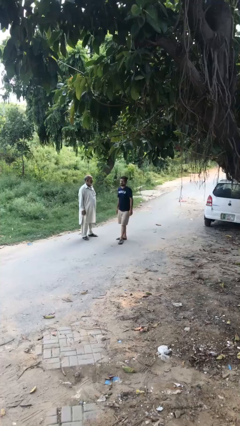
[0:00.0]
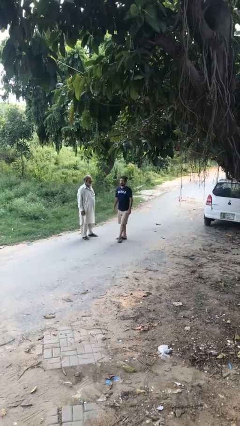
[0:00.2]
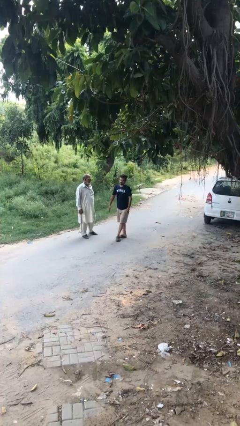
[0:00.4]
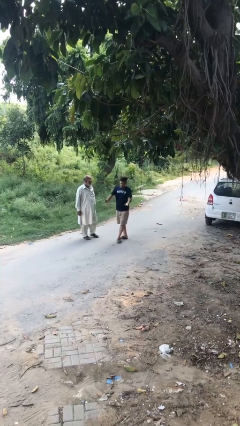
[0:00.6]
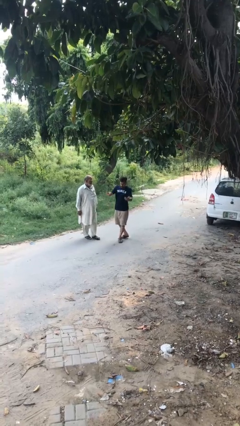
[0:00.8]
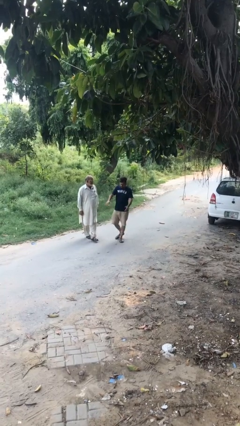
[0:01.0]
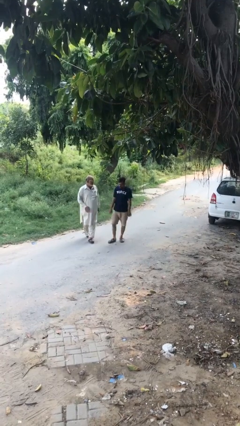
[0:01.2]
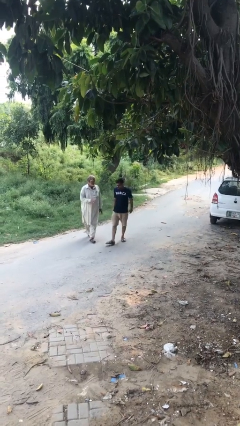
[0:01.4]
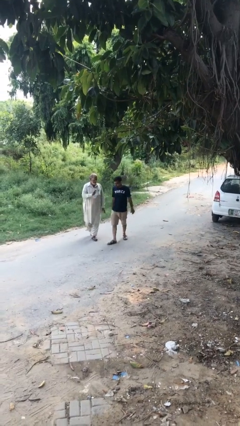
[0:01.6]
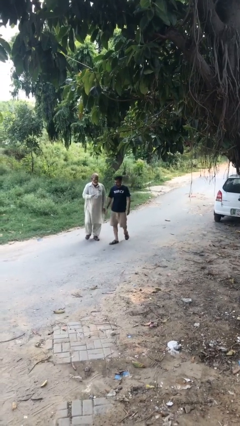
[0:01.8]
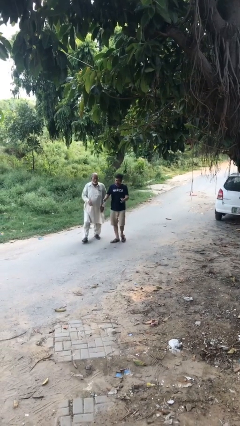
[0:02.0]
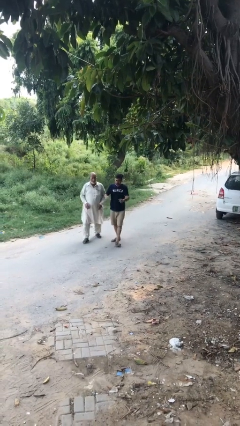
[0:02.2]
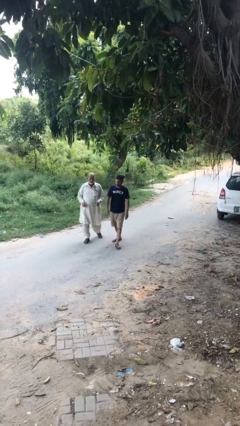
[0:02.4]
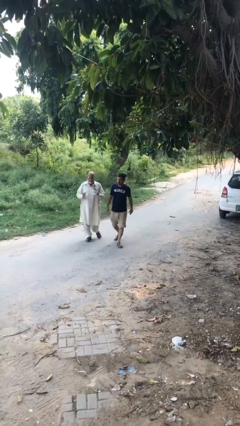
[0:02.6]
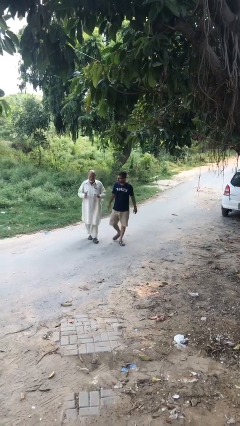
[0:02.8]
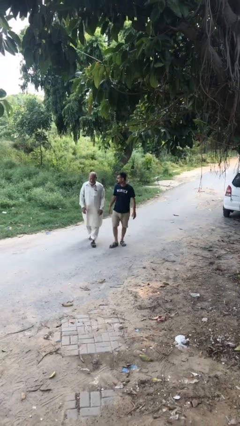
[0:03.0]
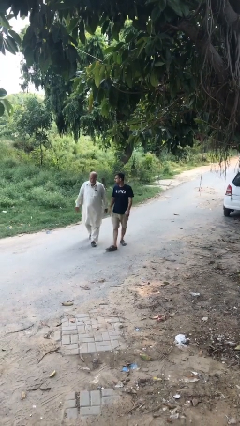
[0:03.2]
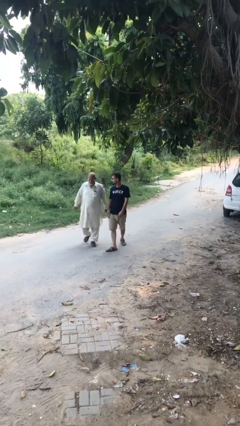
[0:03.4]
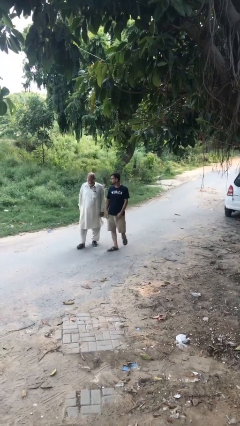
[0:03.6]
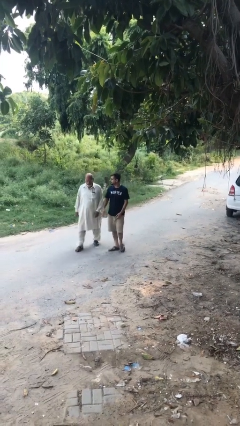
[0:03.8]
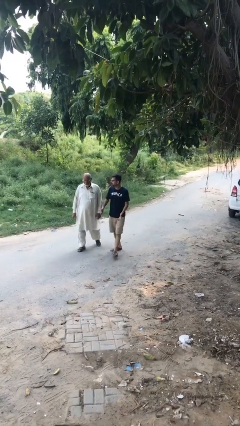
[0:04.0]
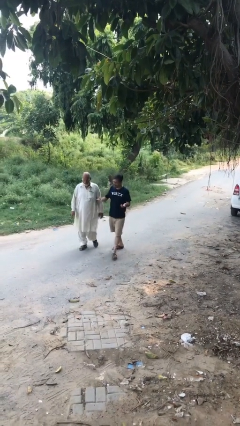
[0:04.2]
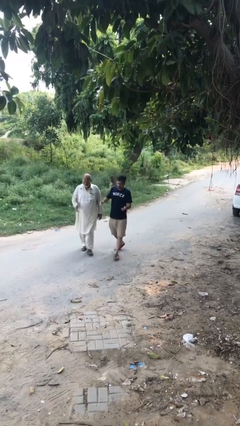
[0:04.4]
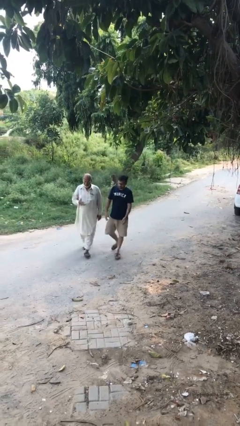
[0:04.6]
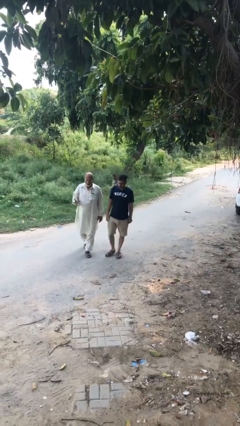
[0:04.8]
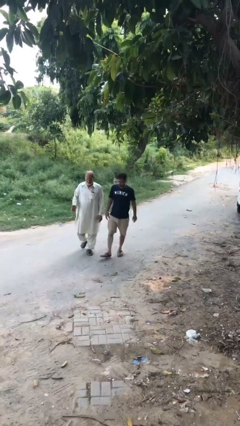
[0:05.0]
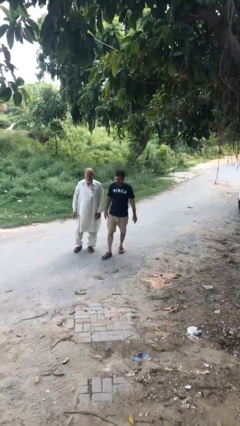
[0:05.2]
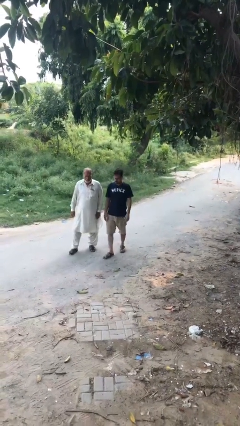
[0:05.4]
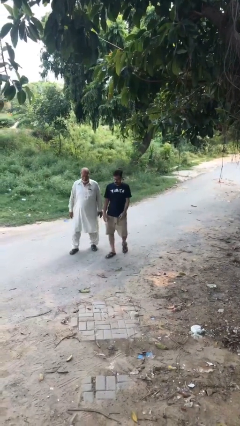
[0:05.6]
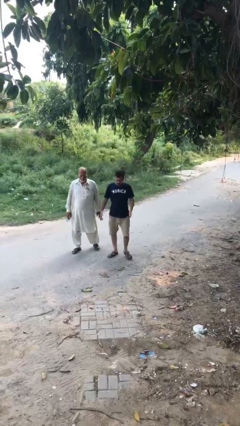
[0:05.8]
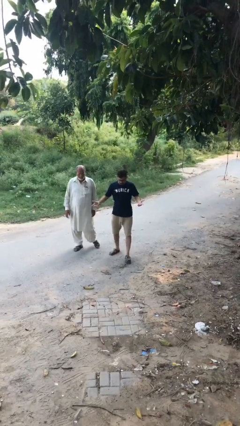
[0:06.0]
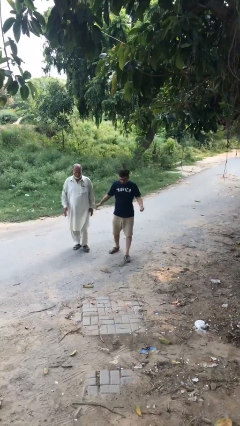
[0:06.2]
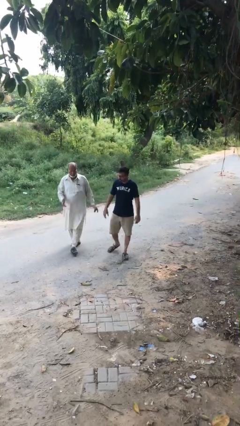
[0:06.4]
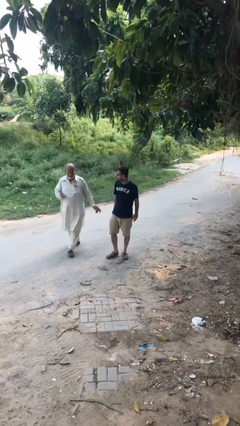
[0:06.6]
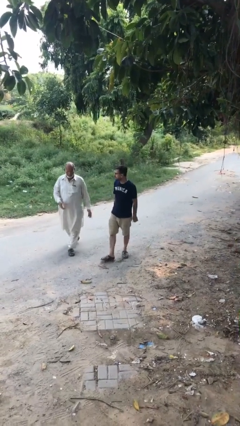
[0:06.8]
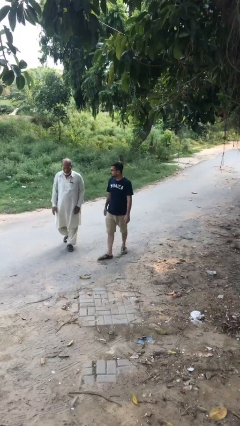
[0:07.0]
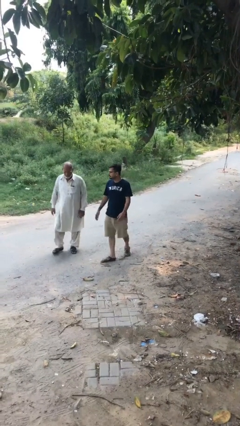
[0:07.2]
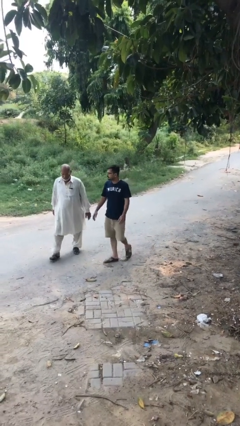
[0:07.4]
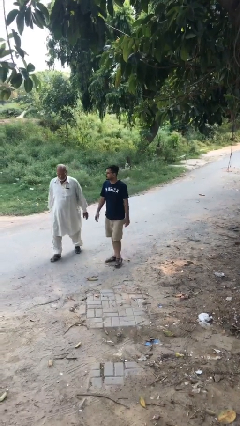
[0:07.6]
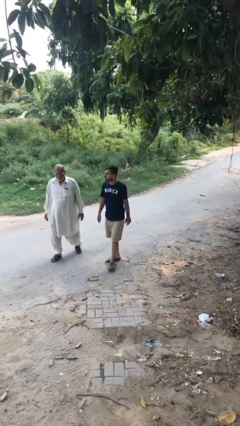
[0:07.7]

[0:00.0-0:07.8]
person talks to person

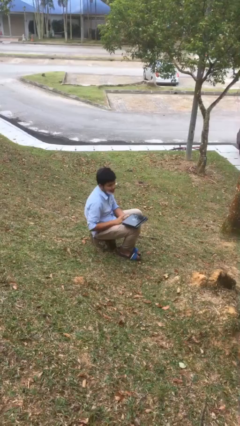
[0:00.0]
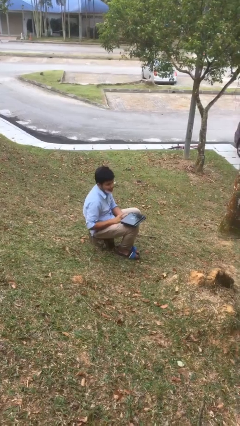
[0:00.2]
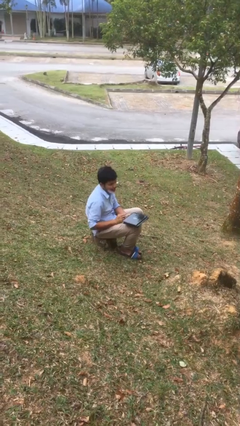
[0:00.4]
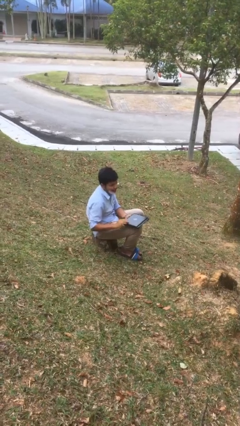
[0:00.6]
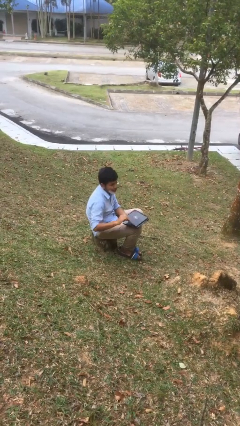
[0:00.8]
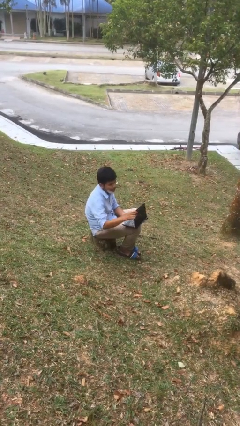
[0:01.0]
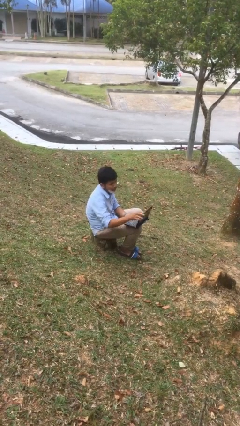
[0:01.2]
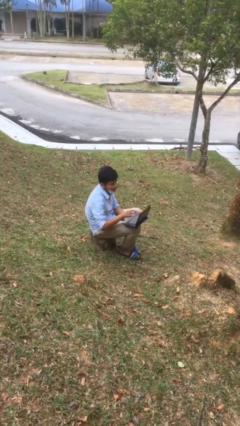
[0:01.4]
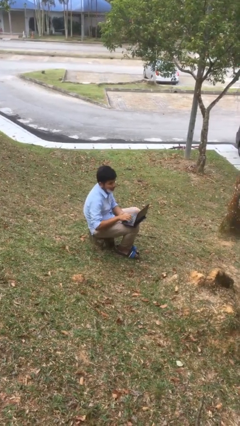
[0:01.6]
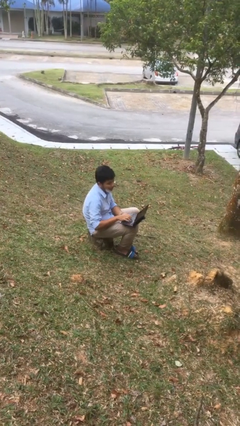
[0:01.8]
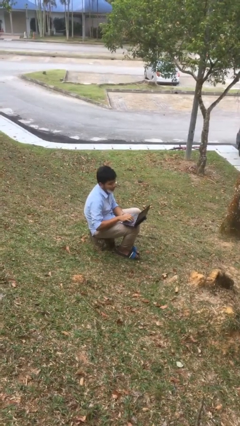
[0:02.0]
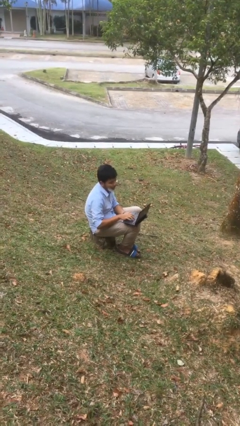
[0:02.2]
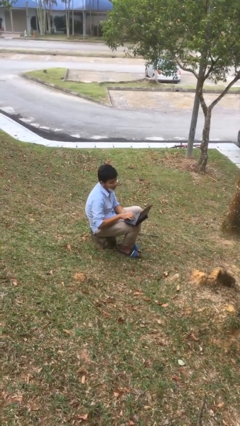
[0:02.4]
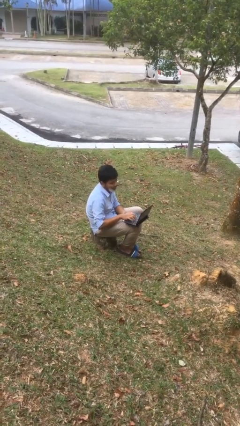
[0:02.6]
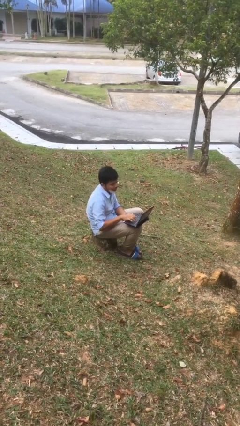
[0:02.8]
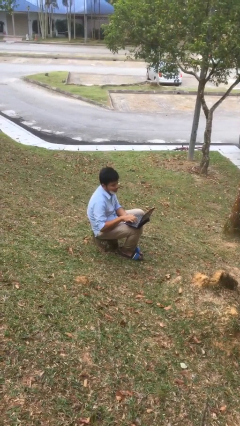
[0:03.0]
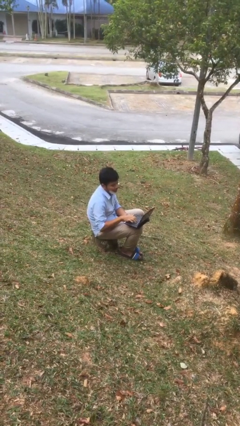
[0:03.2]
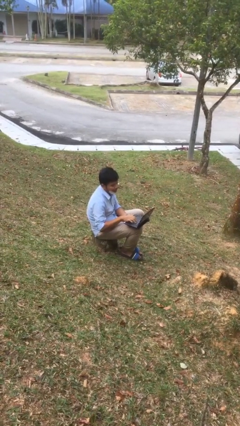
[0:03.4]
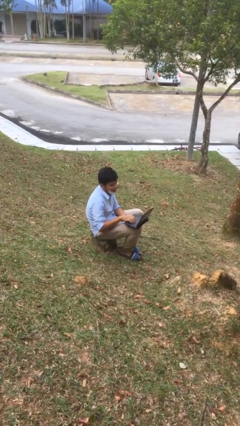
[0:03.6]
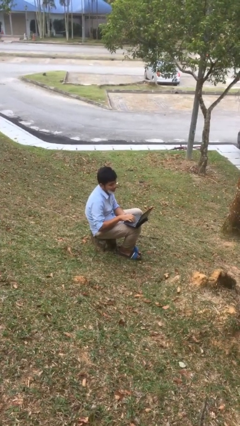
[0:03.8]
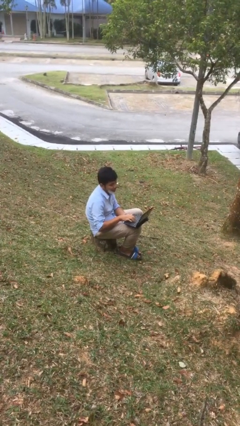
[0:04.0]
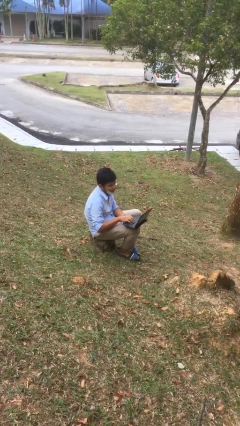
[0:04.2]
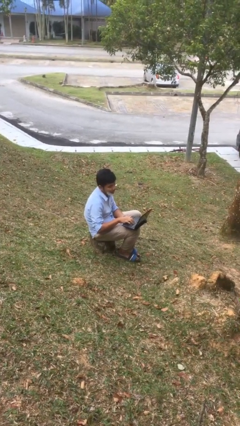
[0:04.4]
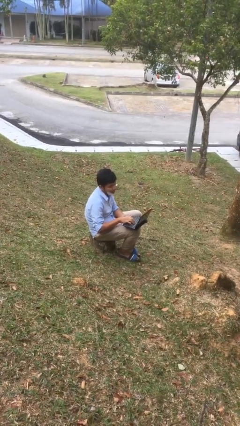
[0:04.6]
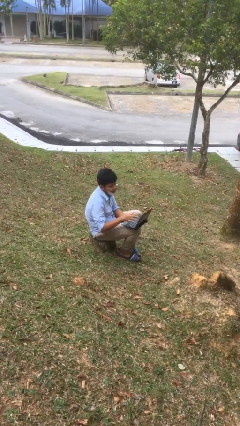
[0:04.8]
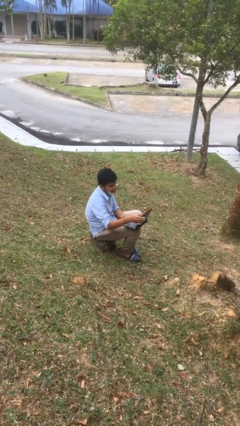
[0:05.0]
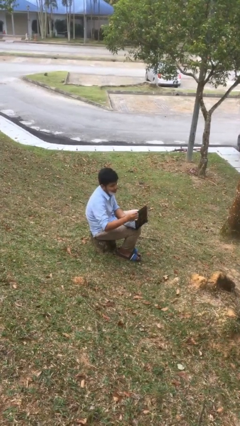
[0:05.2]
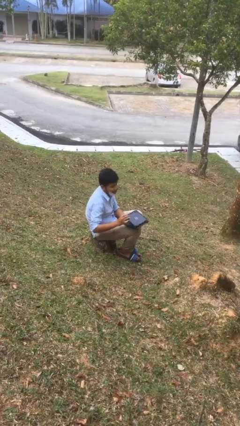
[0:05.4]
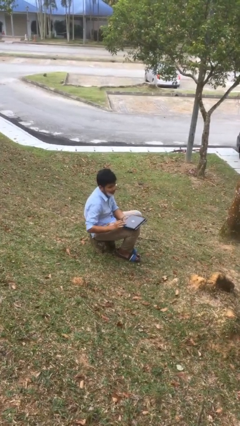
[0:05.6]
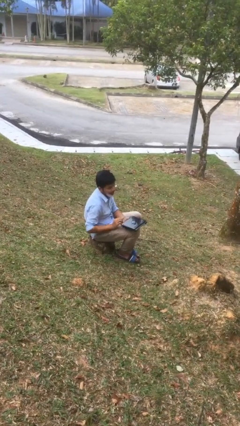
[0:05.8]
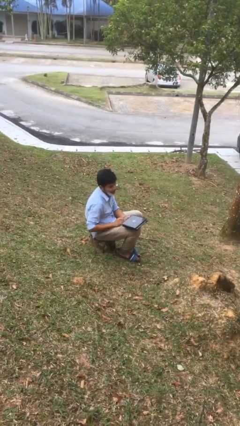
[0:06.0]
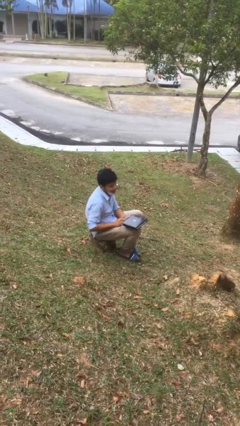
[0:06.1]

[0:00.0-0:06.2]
person interacts with laptop

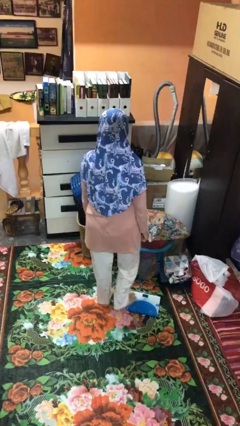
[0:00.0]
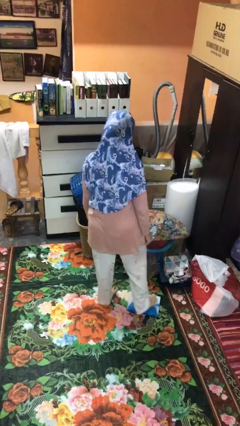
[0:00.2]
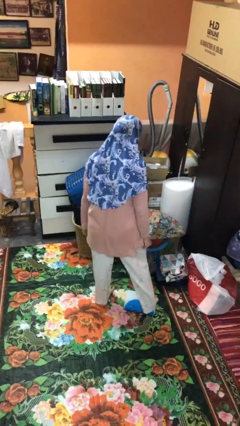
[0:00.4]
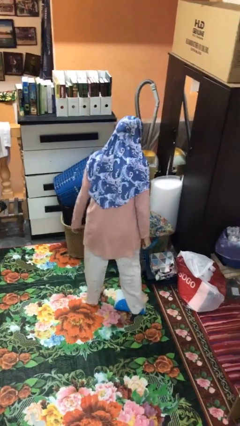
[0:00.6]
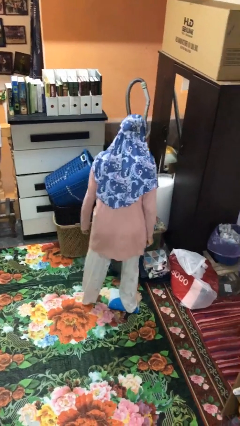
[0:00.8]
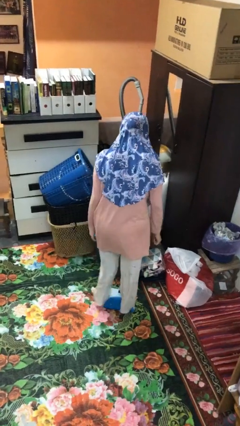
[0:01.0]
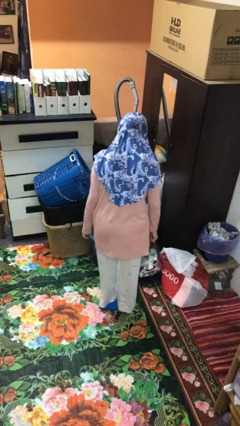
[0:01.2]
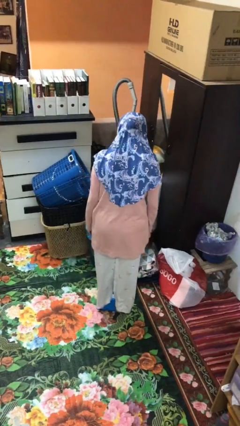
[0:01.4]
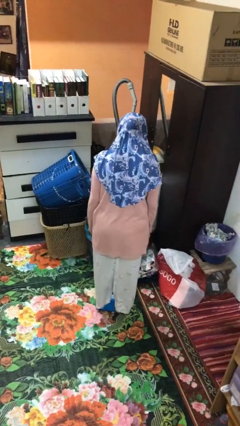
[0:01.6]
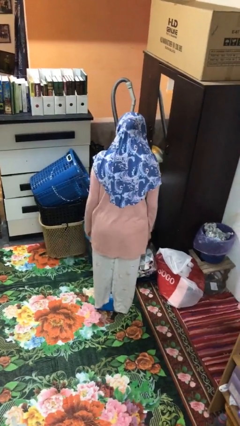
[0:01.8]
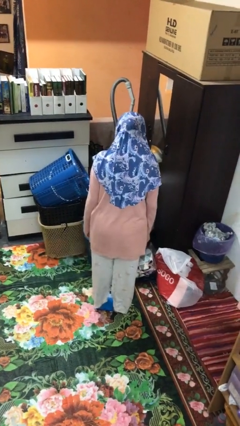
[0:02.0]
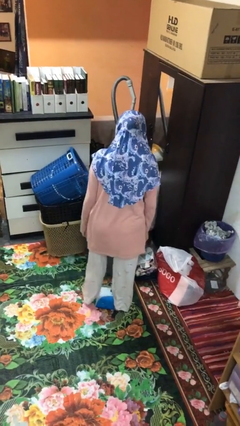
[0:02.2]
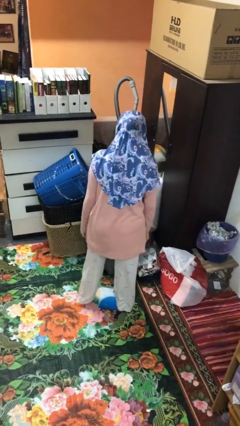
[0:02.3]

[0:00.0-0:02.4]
person uses bodyweight scale

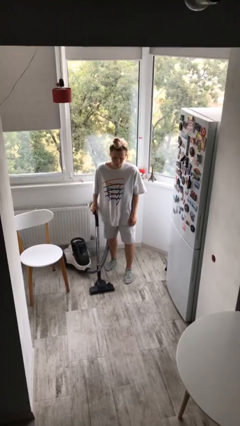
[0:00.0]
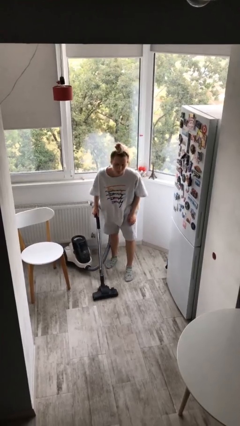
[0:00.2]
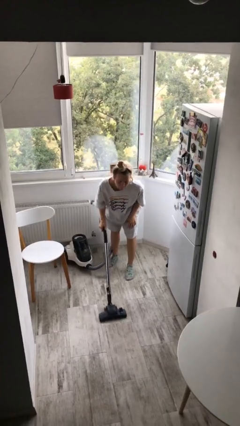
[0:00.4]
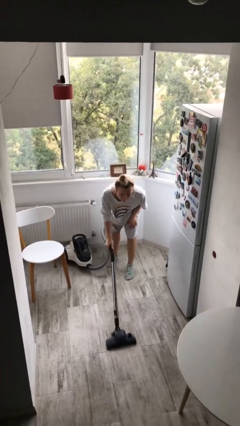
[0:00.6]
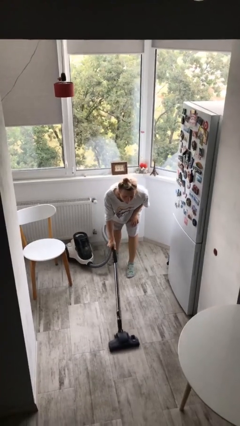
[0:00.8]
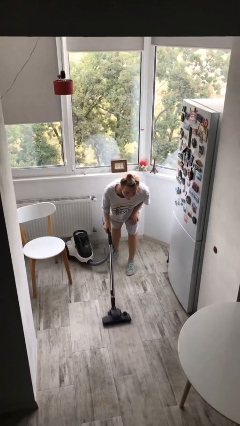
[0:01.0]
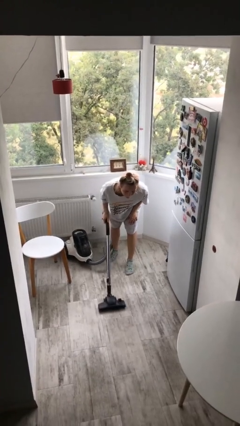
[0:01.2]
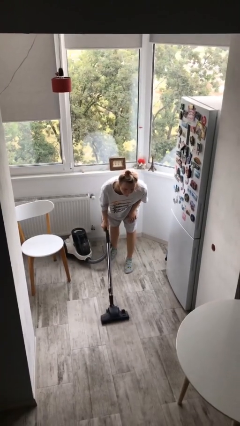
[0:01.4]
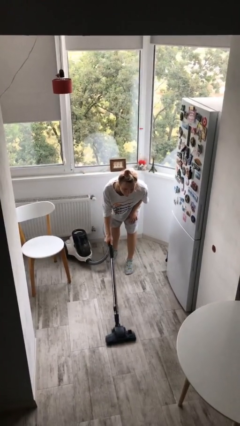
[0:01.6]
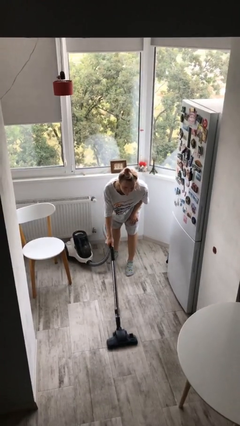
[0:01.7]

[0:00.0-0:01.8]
person vacuums carpet
